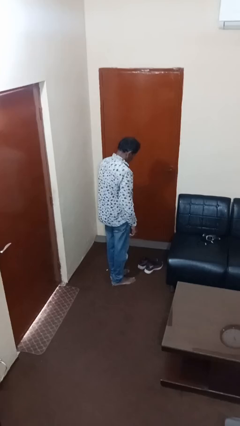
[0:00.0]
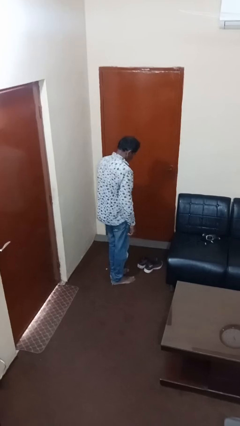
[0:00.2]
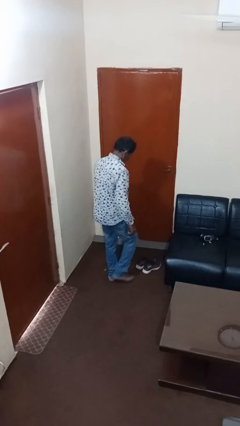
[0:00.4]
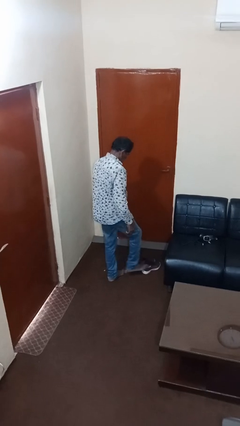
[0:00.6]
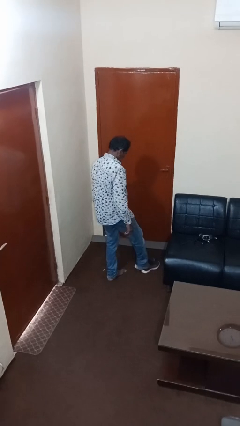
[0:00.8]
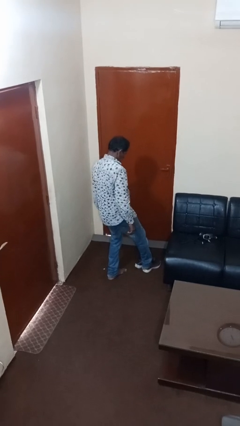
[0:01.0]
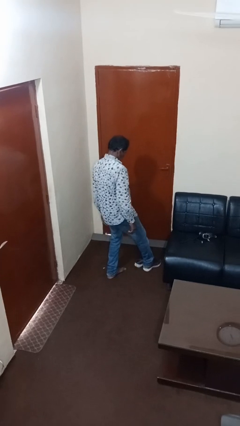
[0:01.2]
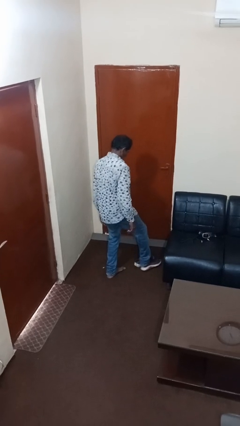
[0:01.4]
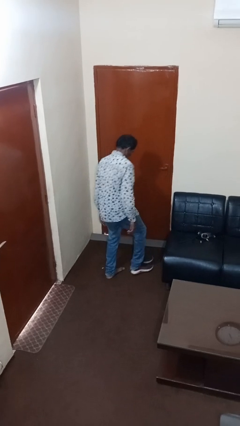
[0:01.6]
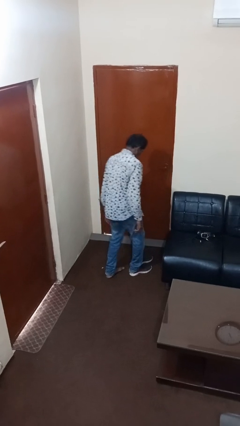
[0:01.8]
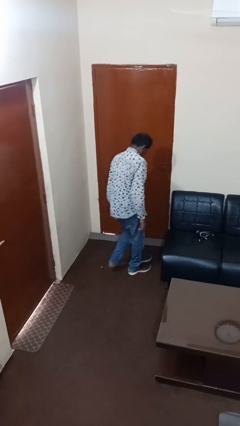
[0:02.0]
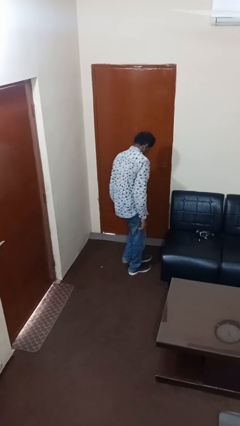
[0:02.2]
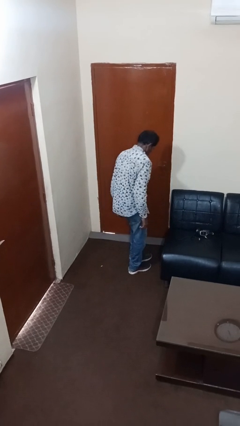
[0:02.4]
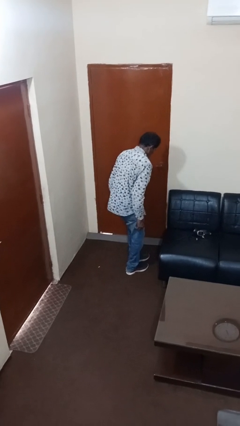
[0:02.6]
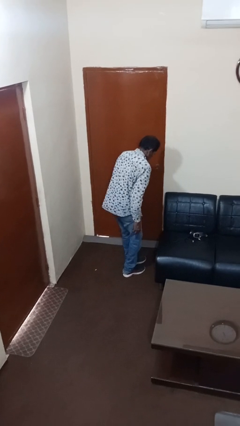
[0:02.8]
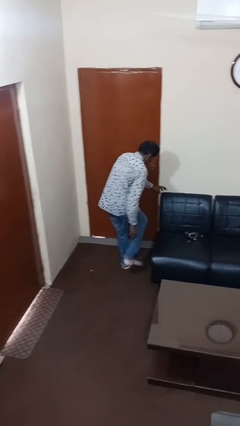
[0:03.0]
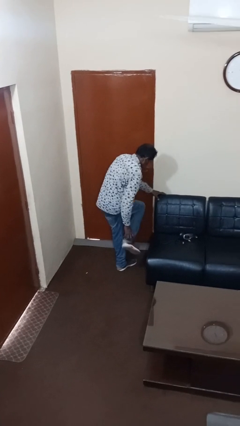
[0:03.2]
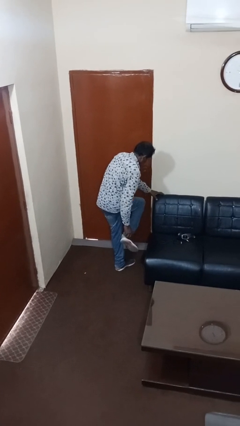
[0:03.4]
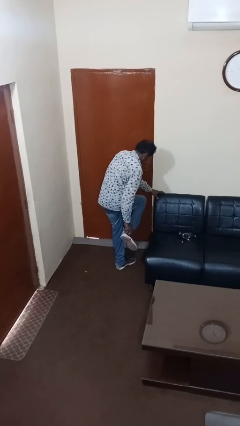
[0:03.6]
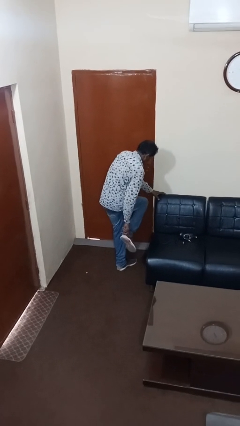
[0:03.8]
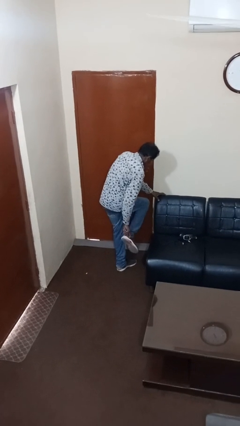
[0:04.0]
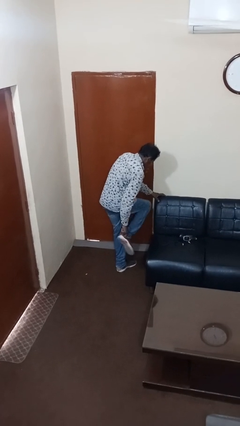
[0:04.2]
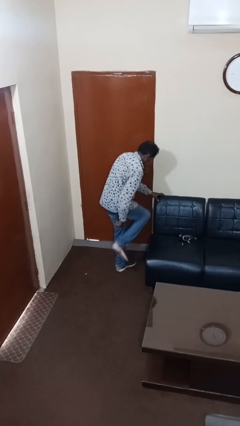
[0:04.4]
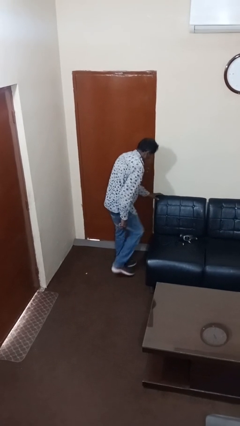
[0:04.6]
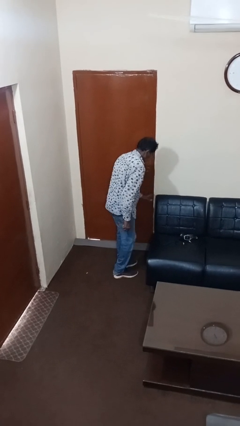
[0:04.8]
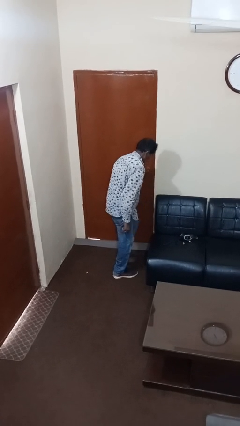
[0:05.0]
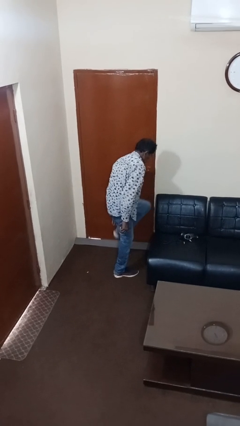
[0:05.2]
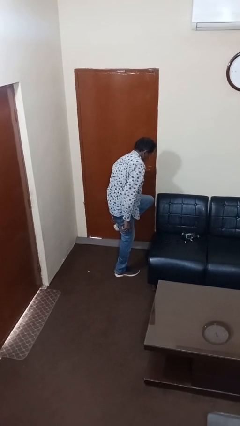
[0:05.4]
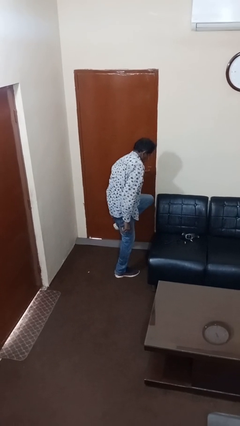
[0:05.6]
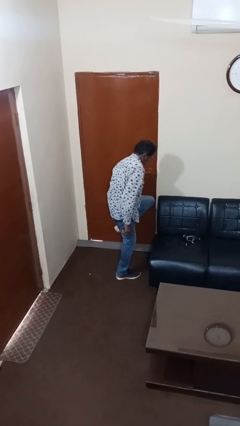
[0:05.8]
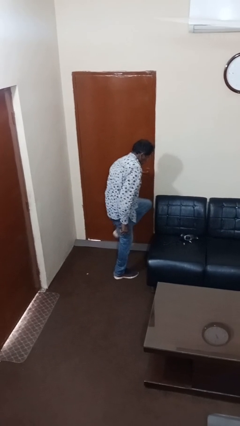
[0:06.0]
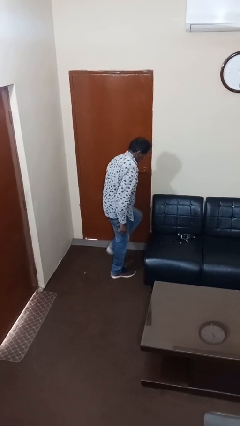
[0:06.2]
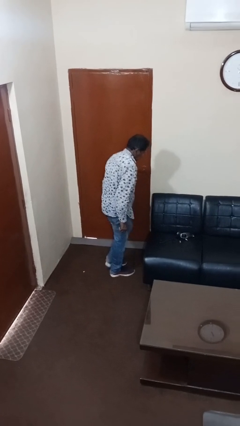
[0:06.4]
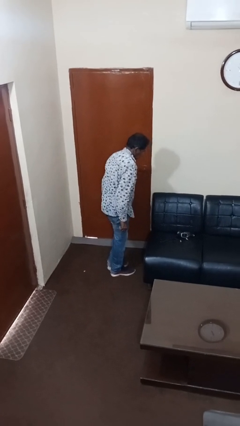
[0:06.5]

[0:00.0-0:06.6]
person puts on shoes

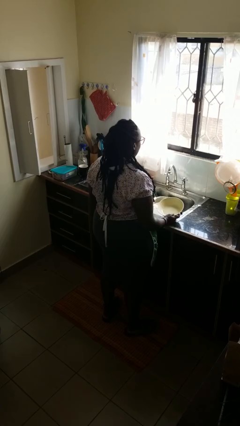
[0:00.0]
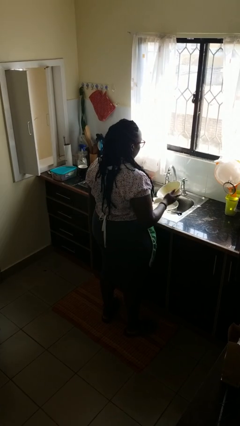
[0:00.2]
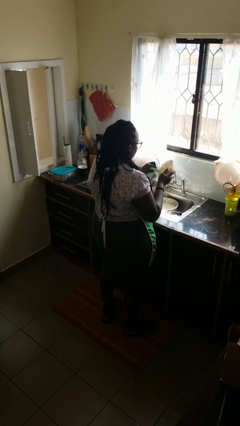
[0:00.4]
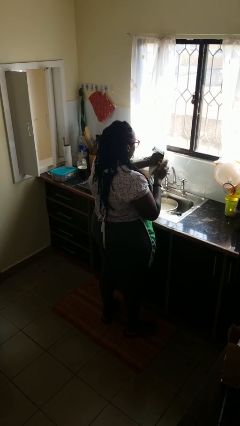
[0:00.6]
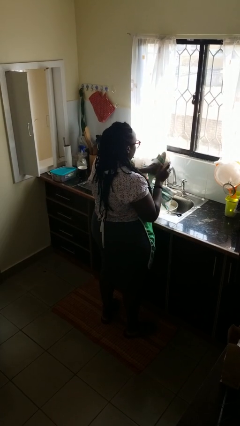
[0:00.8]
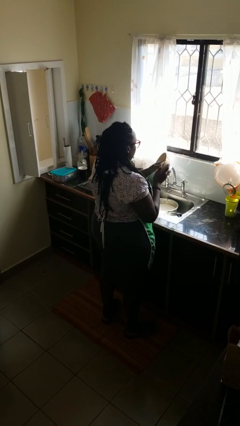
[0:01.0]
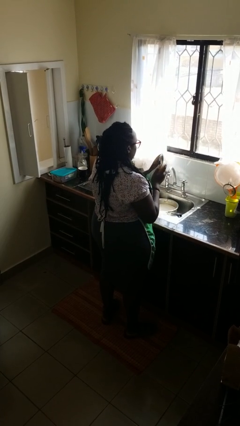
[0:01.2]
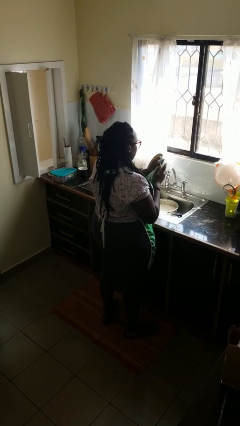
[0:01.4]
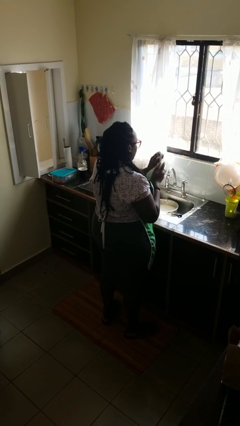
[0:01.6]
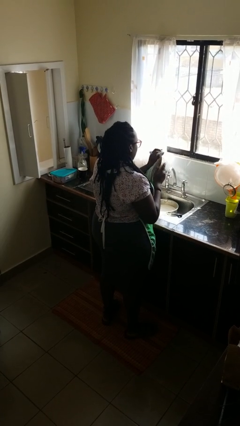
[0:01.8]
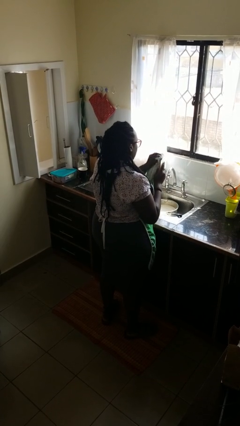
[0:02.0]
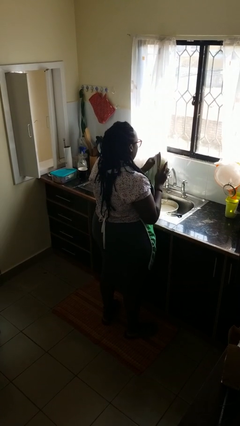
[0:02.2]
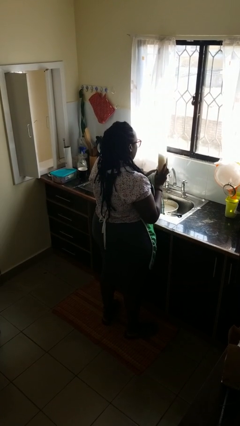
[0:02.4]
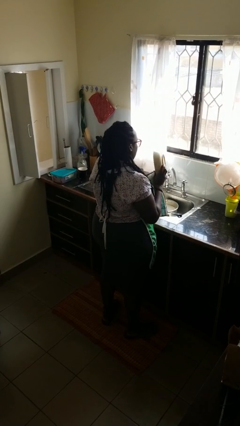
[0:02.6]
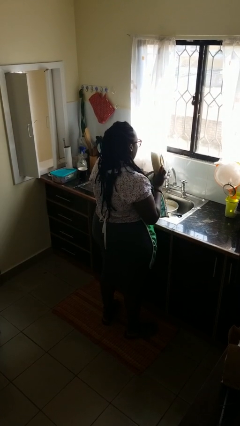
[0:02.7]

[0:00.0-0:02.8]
person dries dish

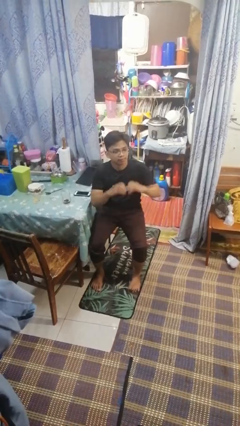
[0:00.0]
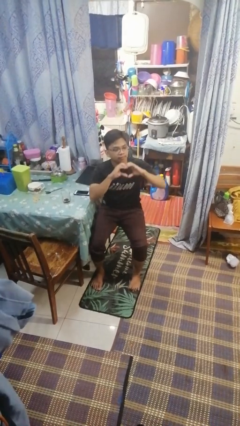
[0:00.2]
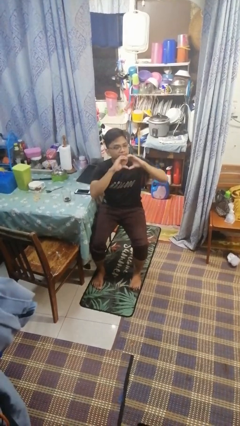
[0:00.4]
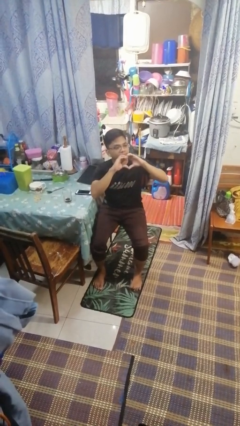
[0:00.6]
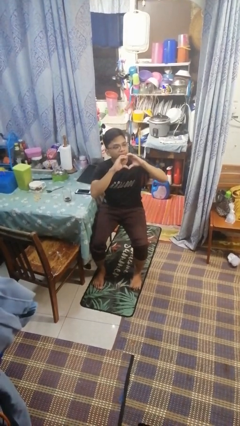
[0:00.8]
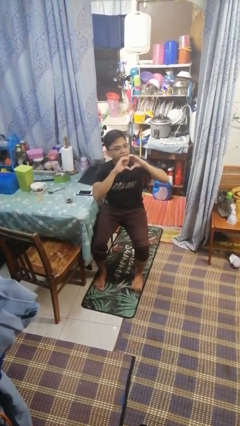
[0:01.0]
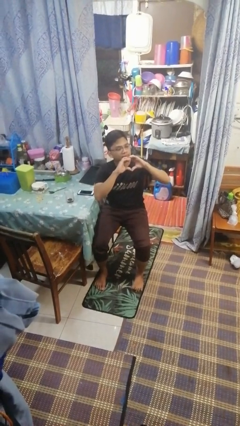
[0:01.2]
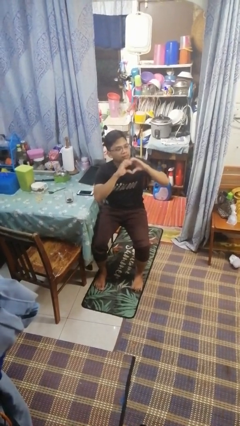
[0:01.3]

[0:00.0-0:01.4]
person gestures heart

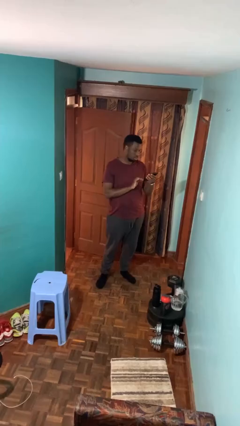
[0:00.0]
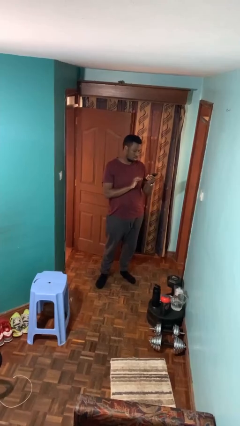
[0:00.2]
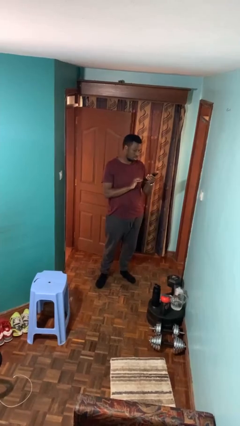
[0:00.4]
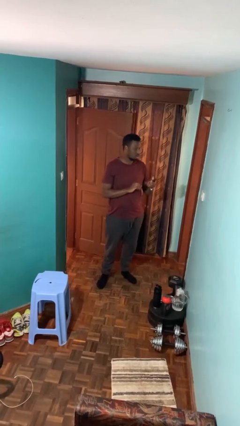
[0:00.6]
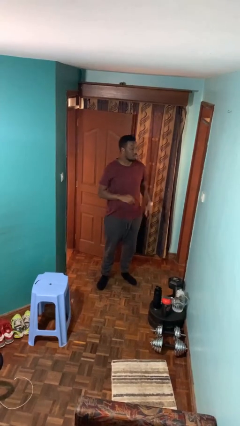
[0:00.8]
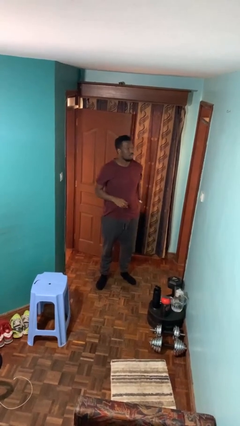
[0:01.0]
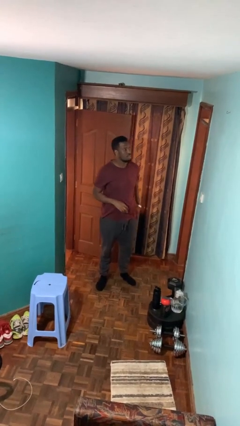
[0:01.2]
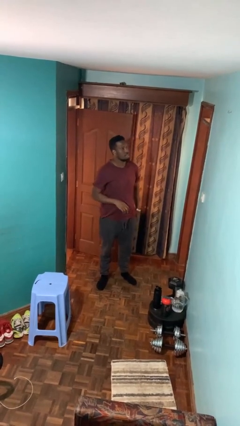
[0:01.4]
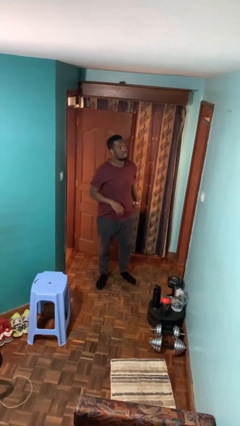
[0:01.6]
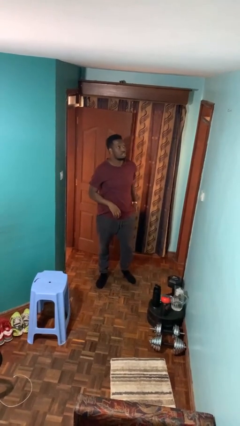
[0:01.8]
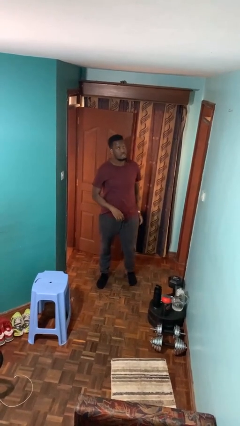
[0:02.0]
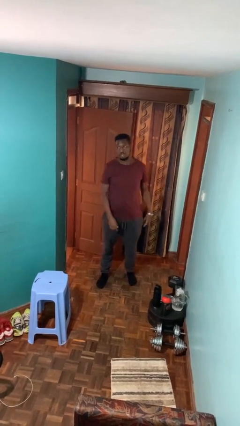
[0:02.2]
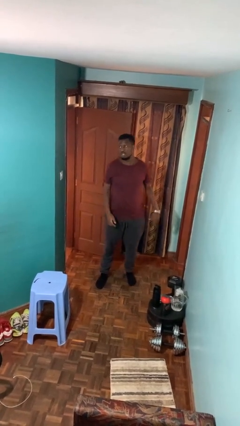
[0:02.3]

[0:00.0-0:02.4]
person puts phone into pocket

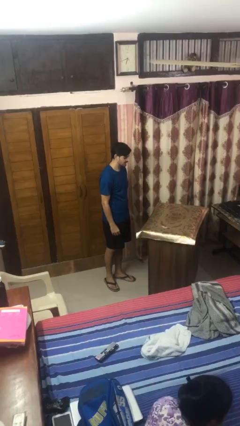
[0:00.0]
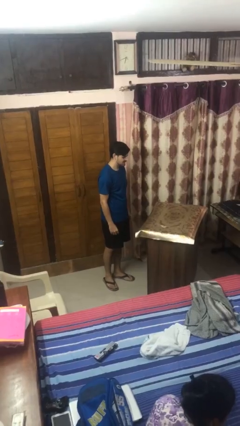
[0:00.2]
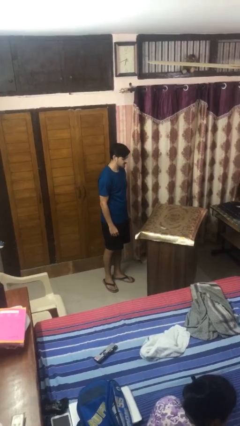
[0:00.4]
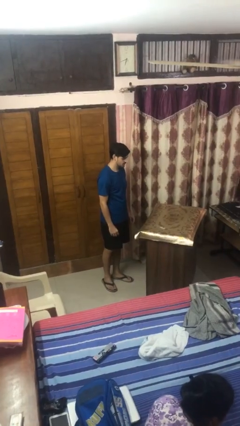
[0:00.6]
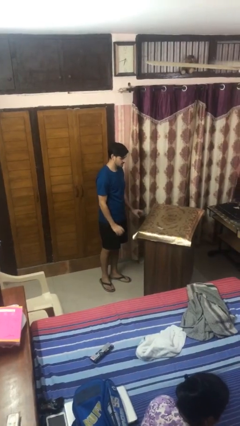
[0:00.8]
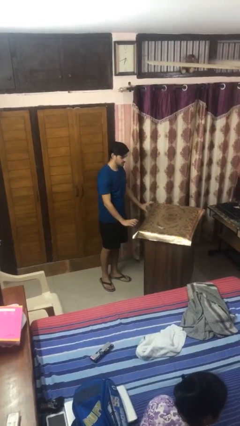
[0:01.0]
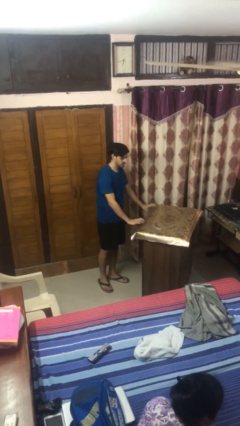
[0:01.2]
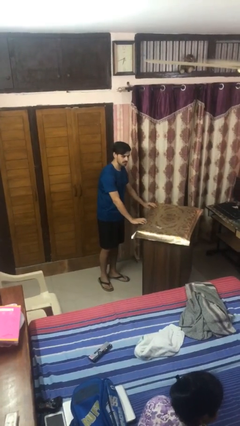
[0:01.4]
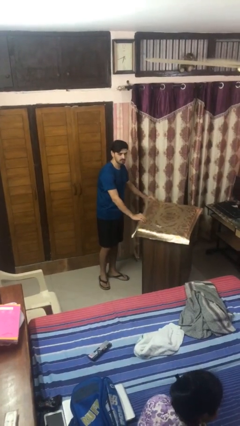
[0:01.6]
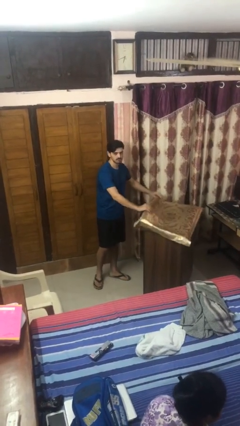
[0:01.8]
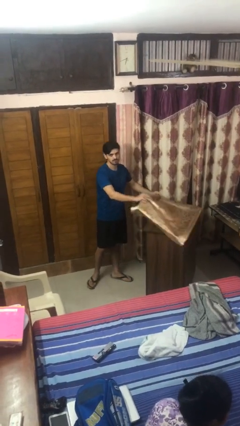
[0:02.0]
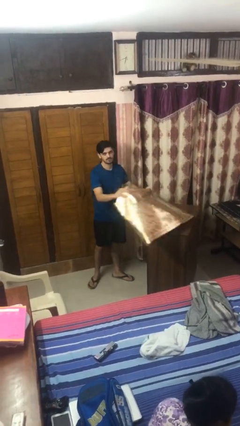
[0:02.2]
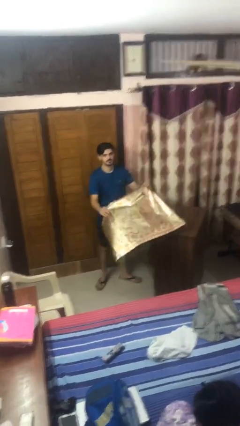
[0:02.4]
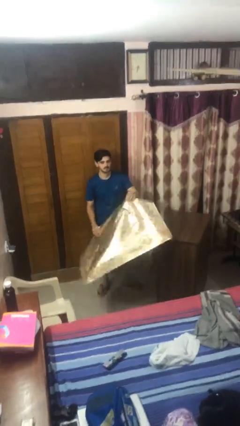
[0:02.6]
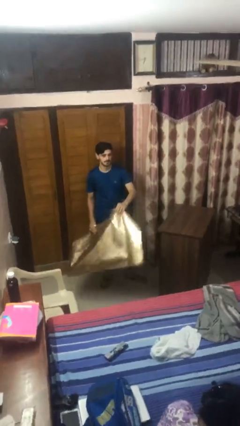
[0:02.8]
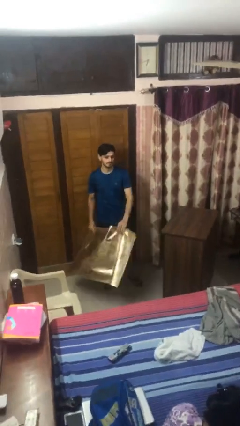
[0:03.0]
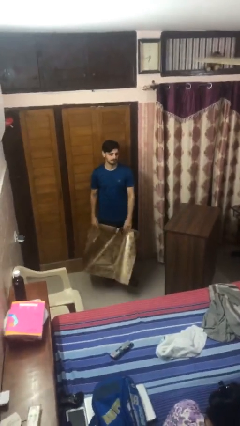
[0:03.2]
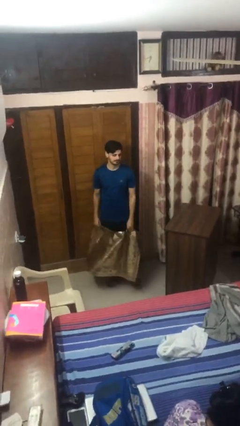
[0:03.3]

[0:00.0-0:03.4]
person folds tablecloth

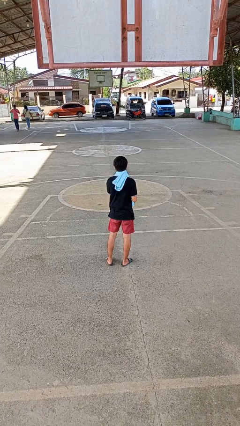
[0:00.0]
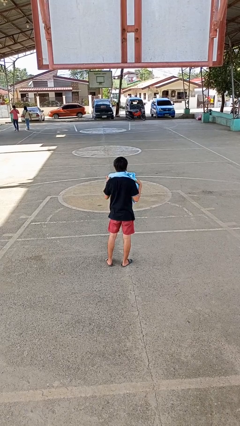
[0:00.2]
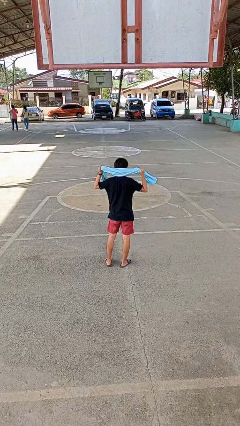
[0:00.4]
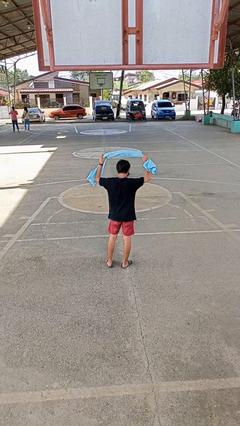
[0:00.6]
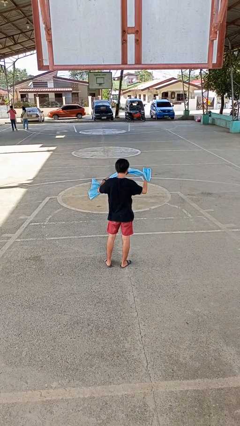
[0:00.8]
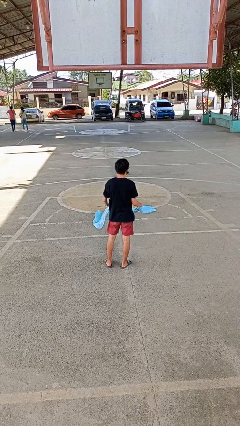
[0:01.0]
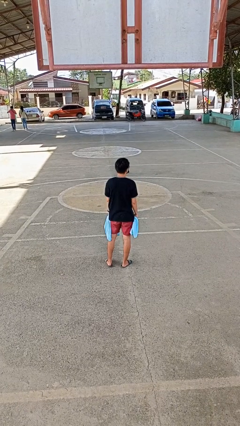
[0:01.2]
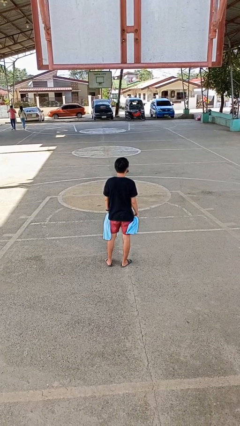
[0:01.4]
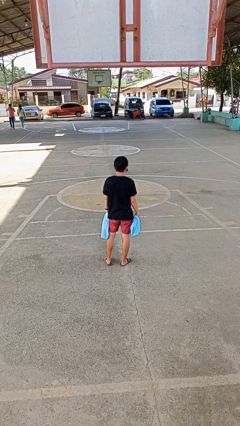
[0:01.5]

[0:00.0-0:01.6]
person takes off scarf
